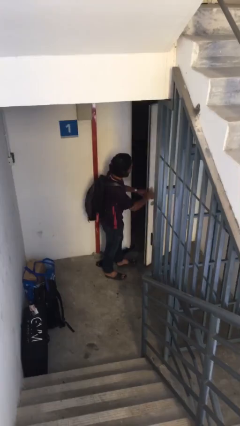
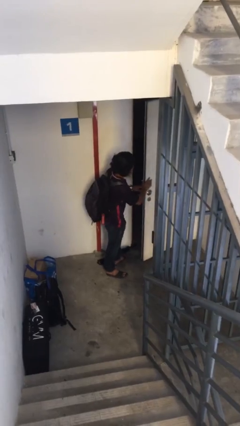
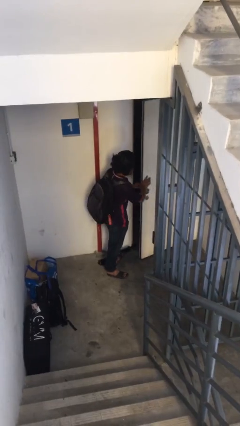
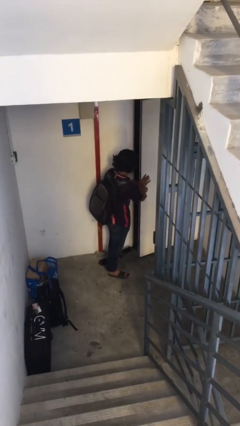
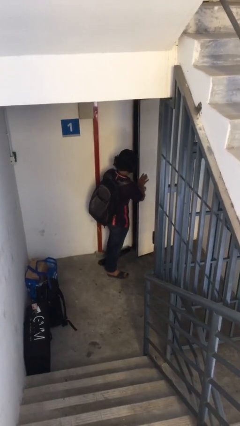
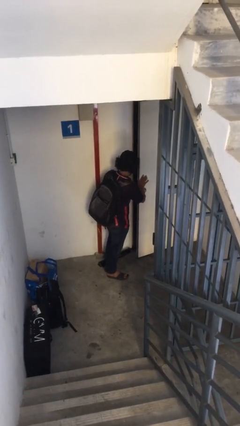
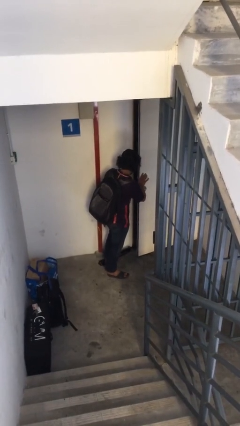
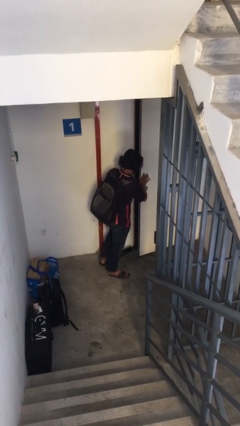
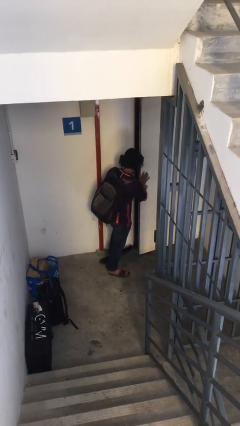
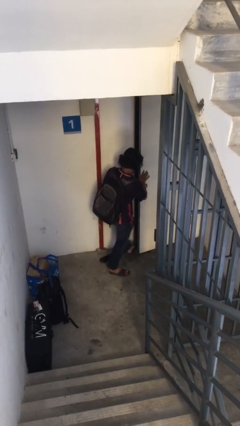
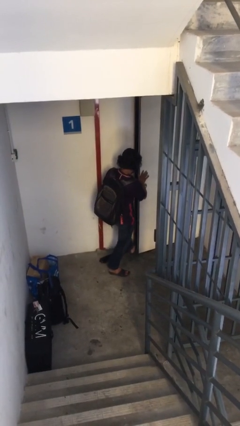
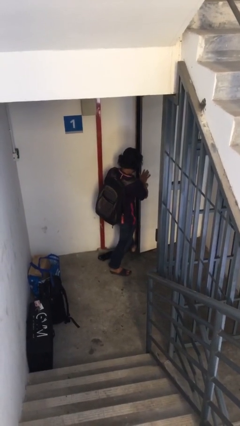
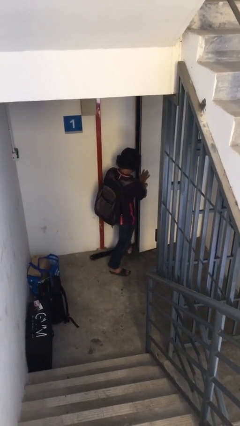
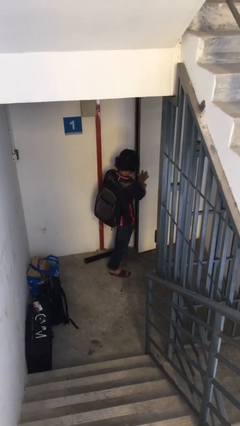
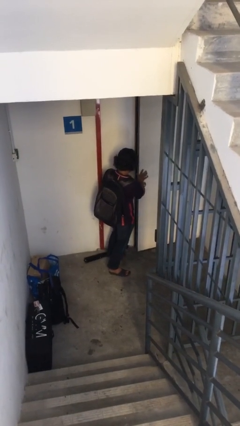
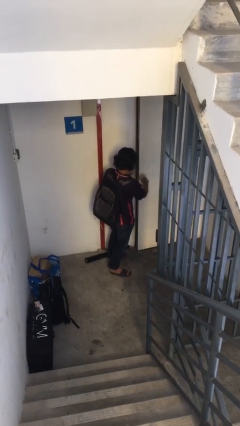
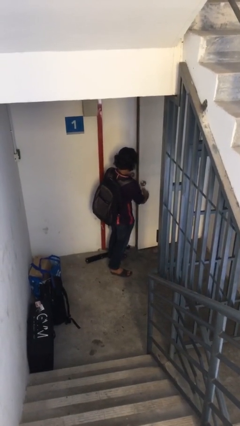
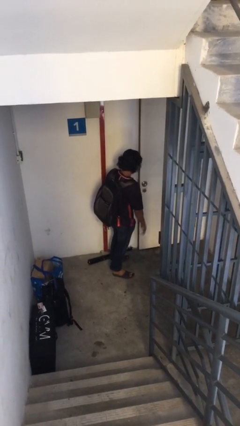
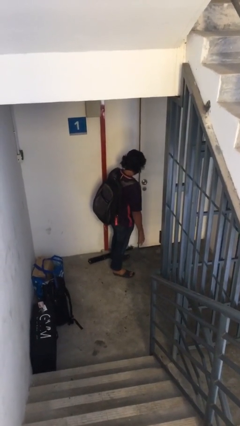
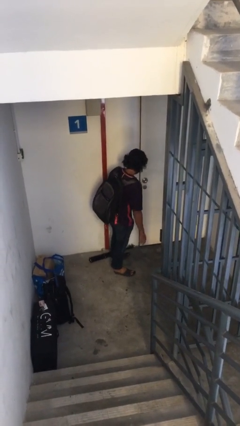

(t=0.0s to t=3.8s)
person closes facility door

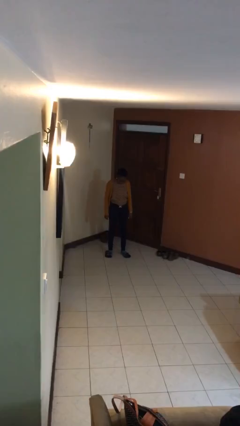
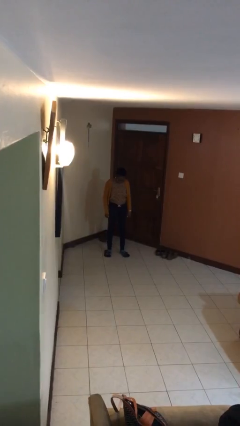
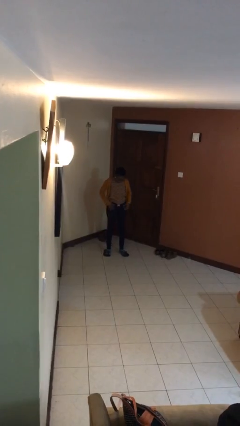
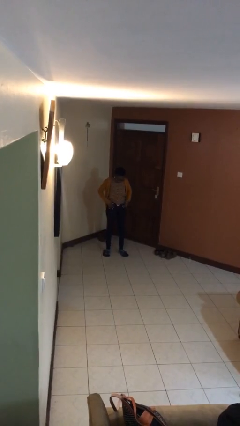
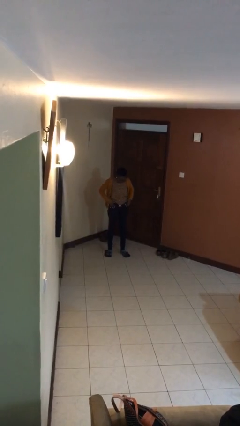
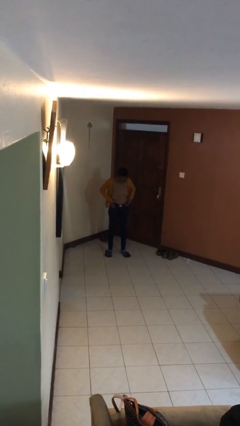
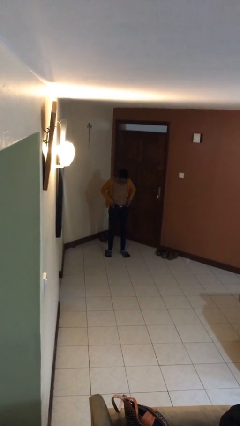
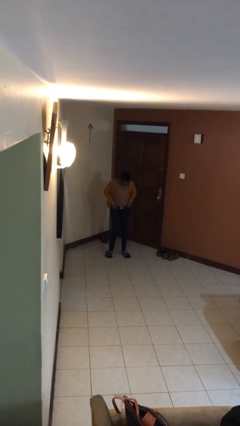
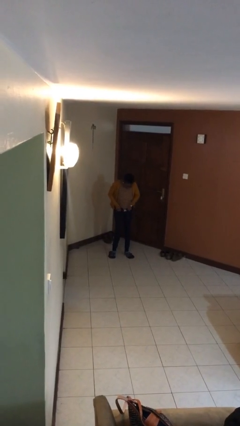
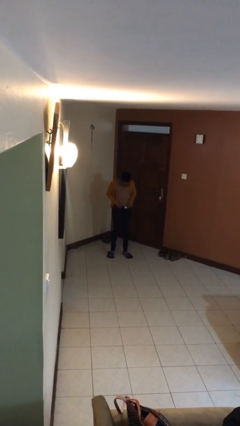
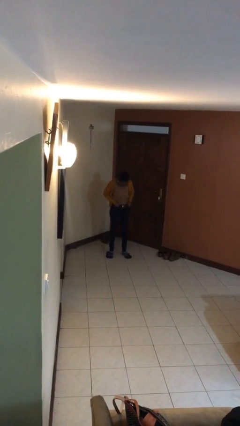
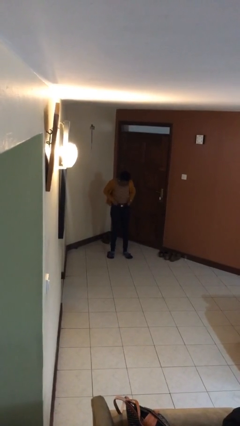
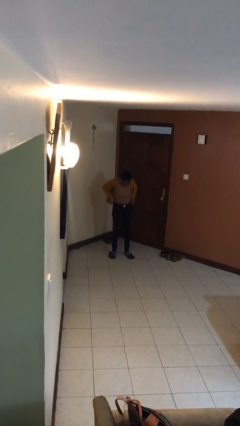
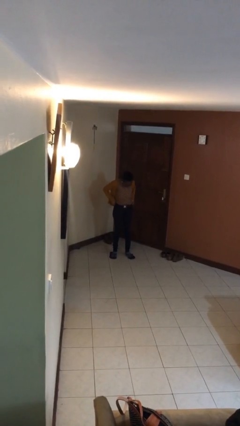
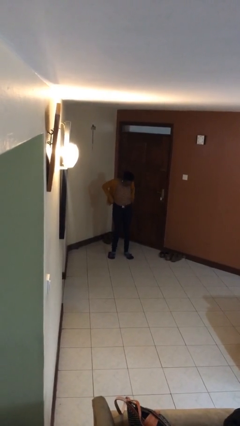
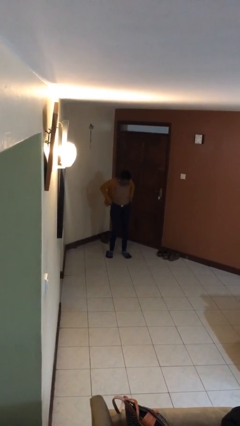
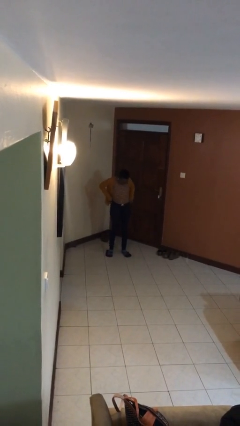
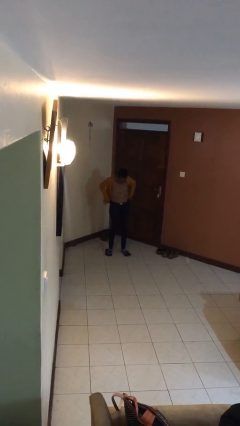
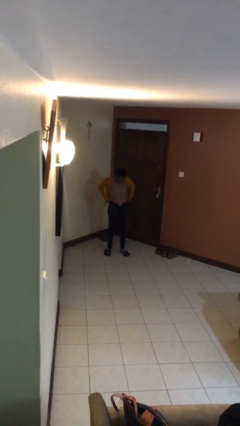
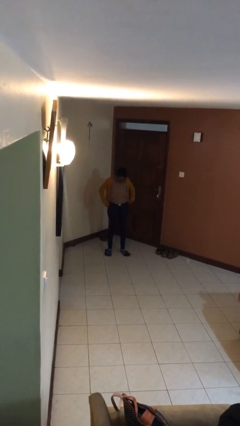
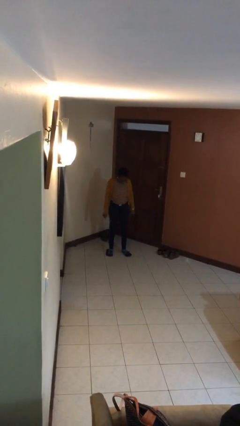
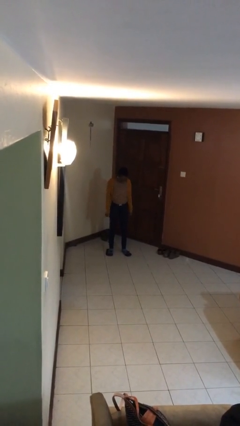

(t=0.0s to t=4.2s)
person hikes up pants

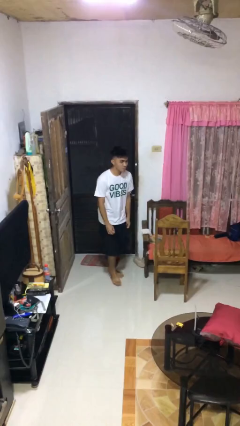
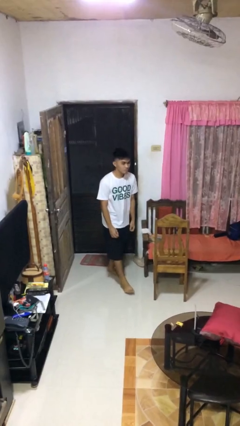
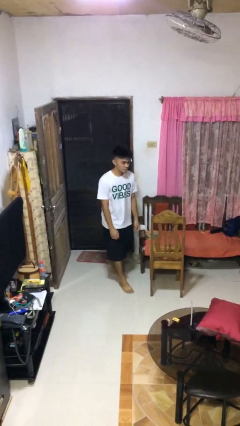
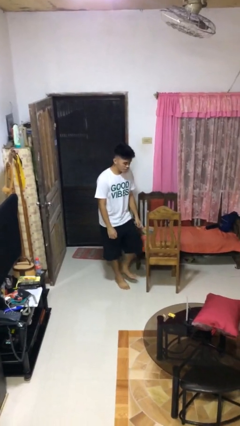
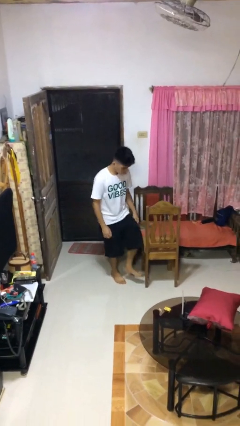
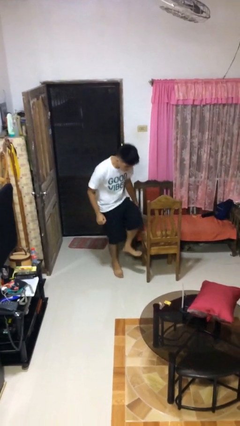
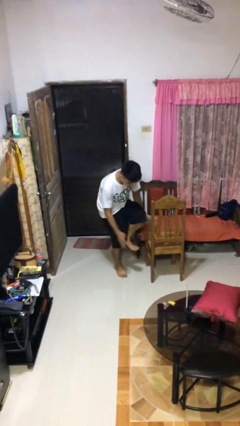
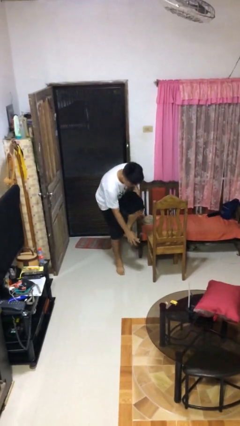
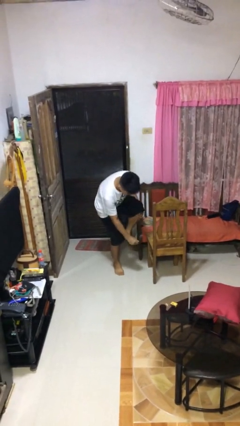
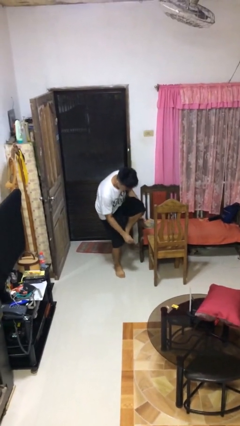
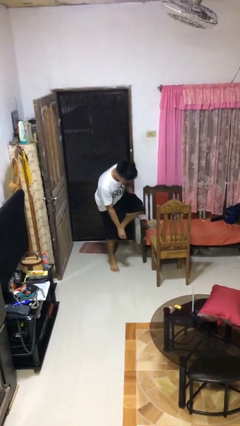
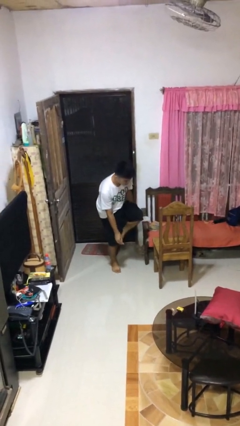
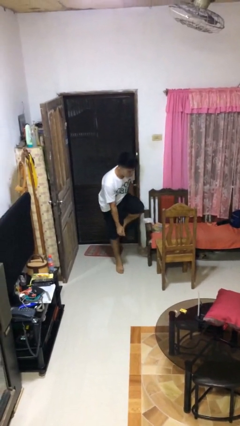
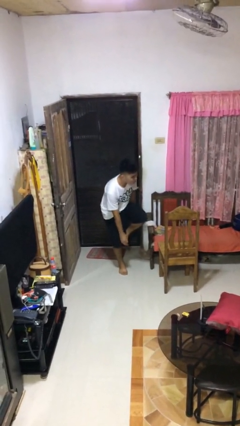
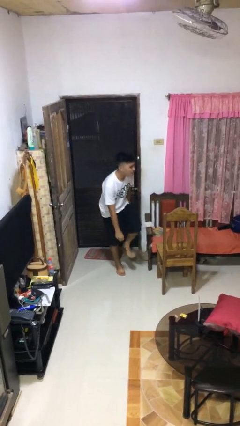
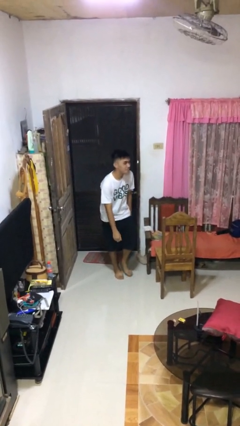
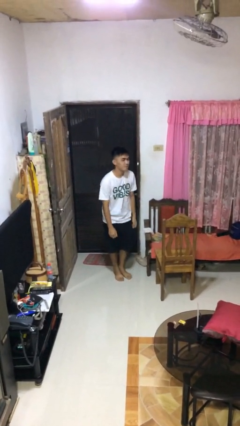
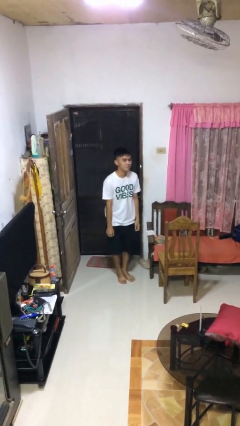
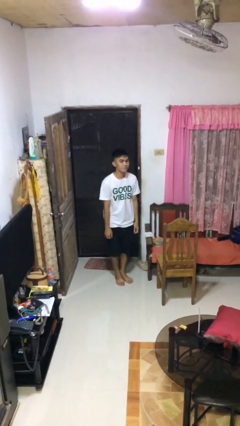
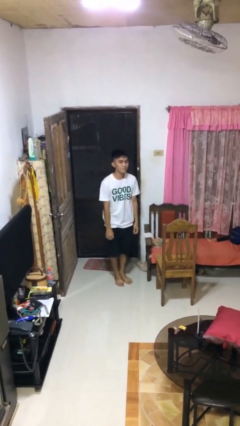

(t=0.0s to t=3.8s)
person stubs toe

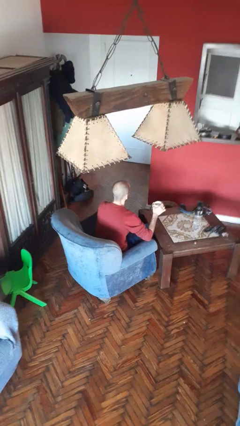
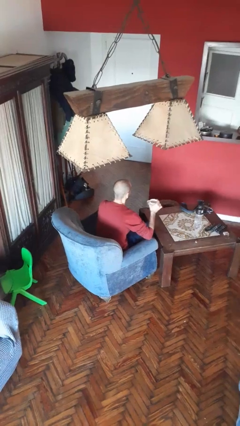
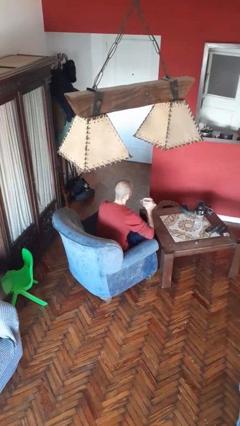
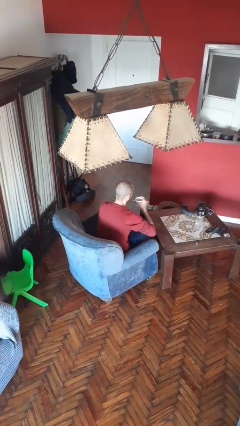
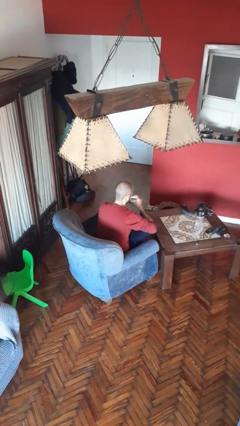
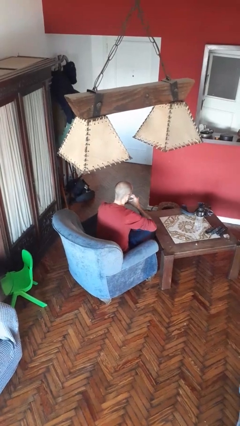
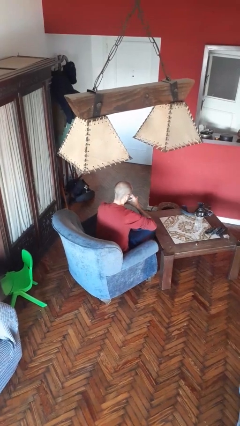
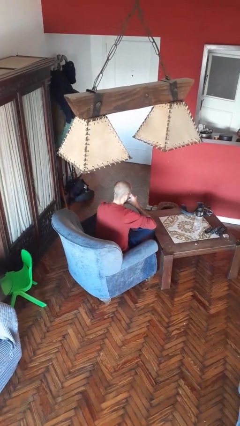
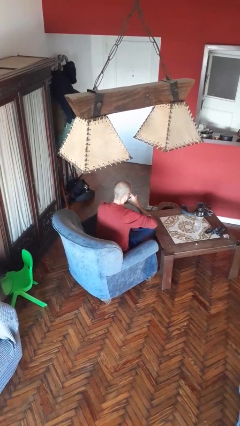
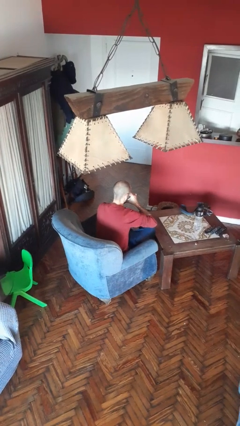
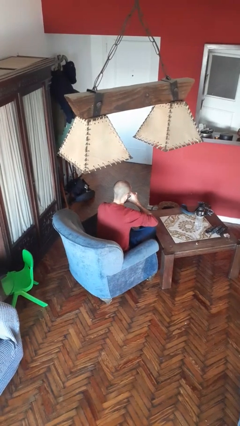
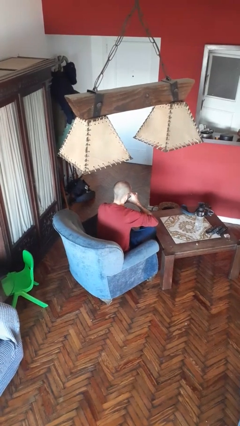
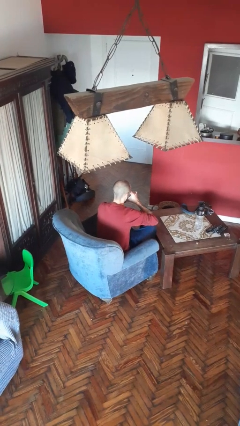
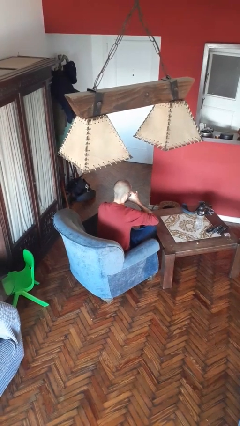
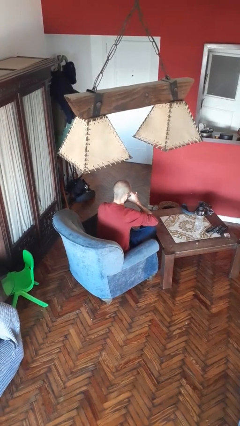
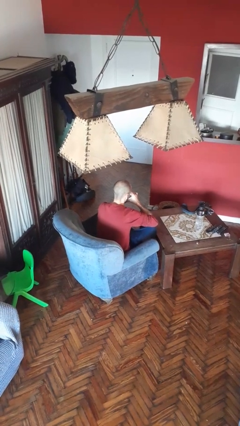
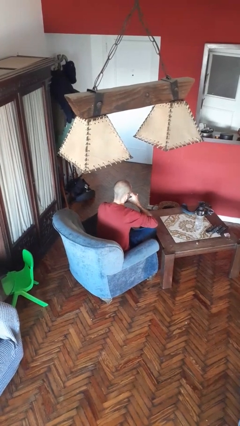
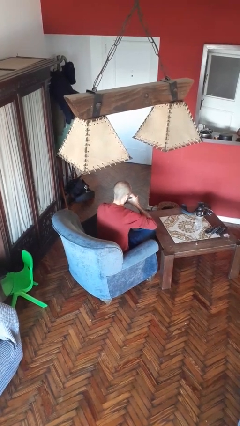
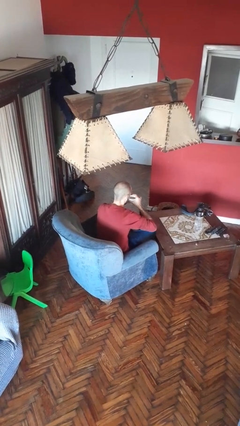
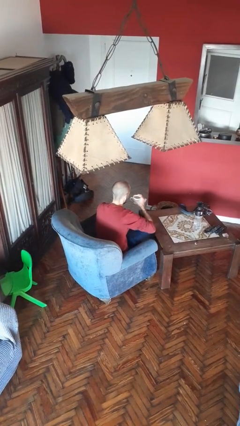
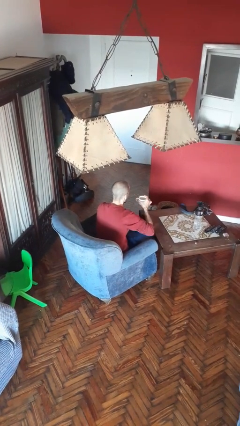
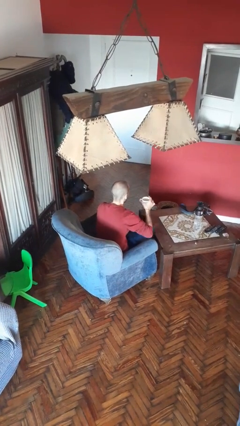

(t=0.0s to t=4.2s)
person drinks from mug

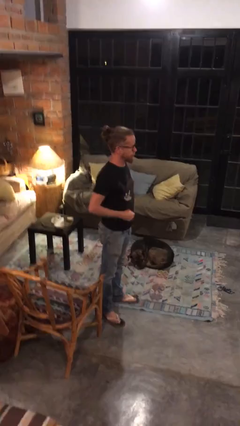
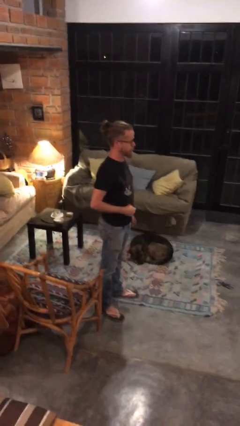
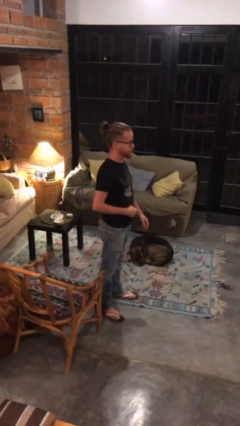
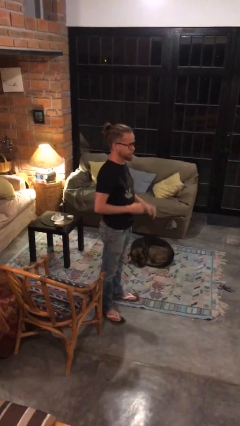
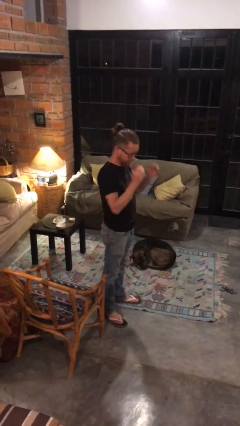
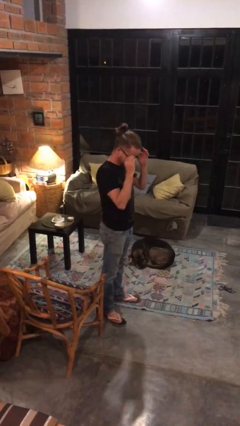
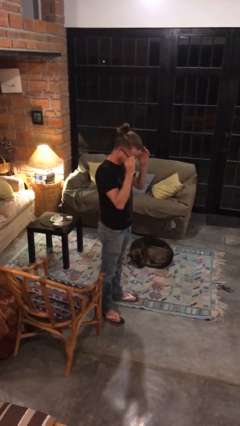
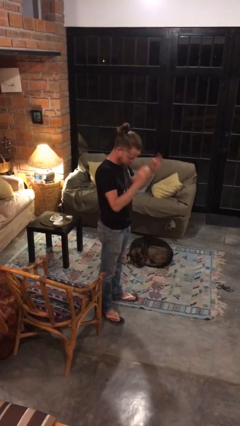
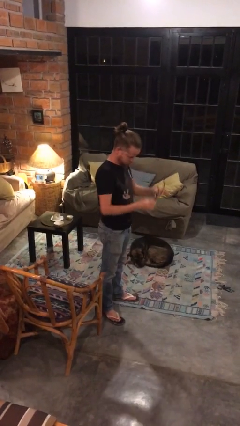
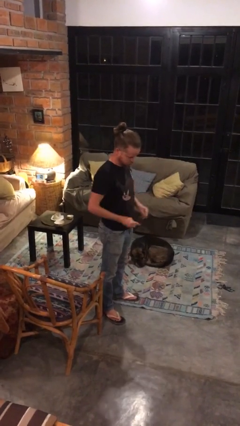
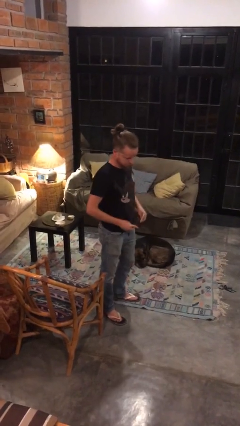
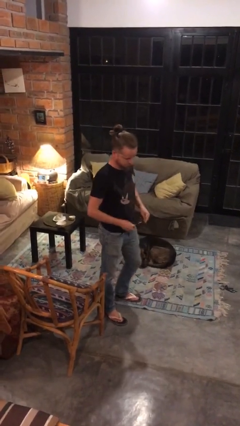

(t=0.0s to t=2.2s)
person takes off glasses
